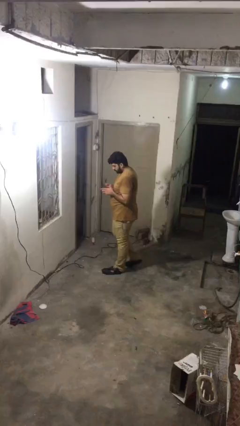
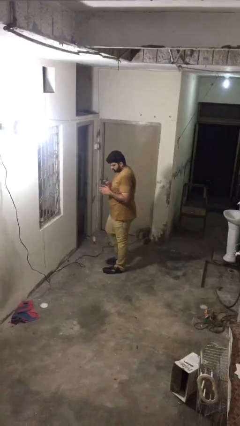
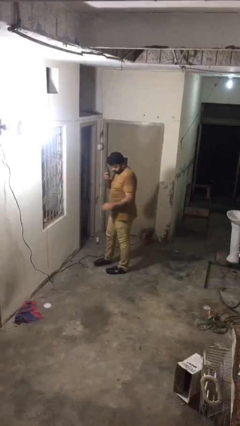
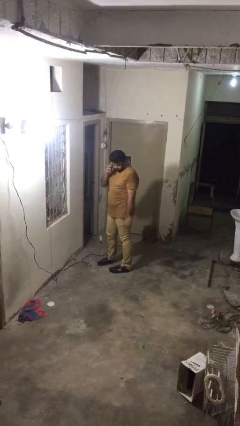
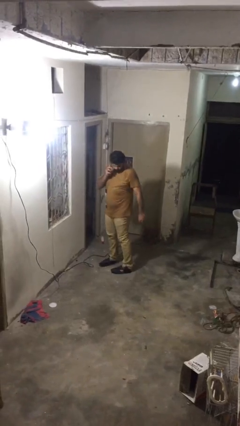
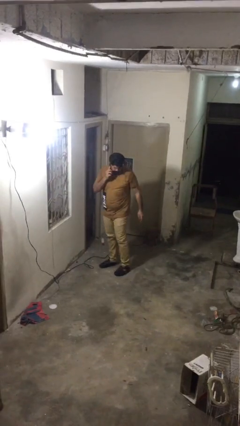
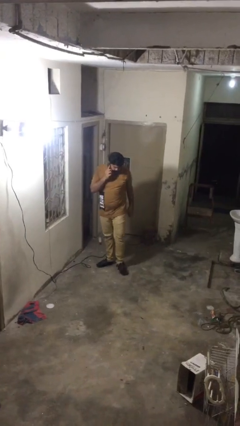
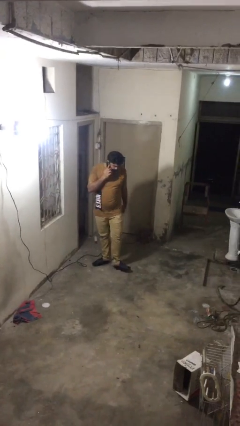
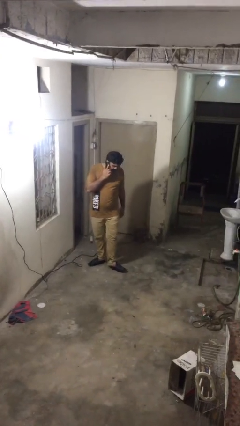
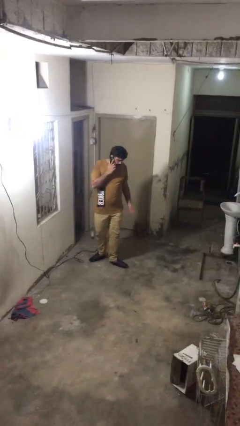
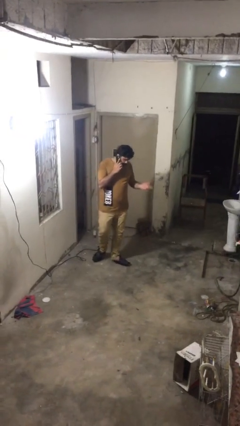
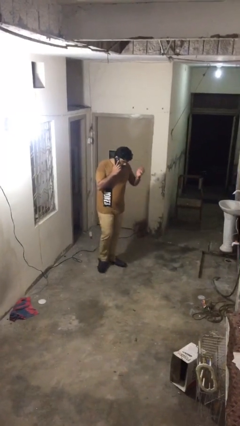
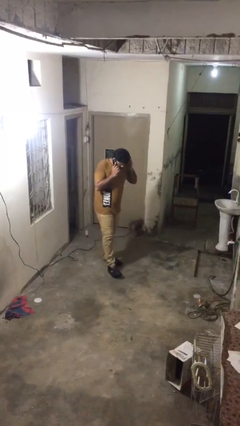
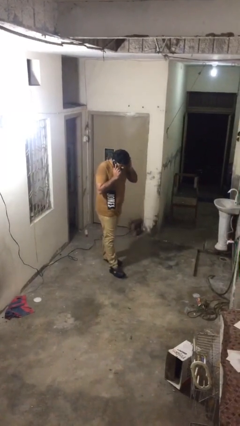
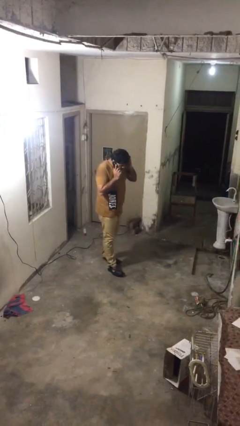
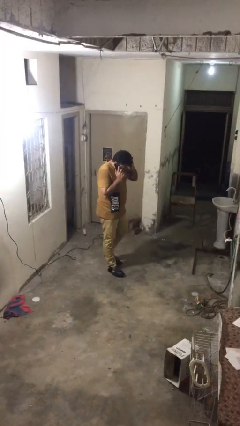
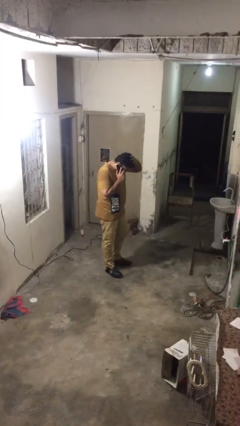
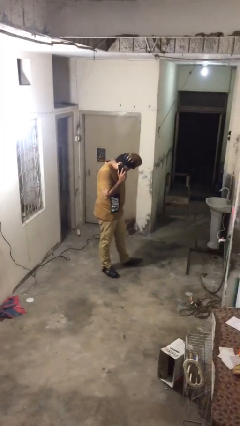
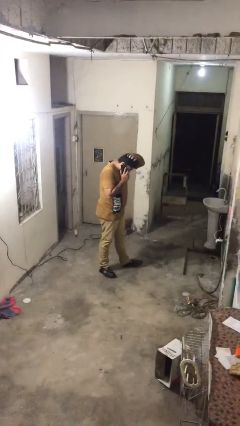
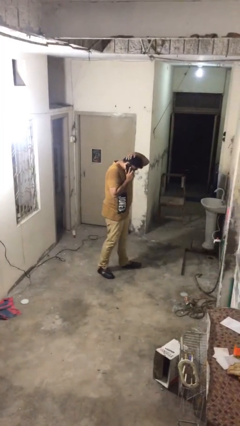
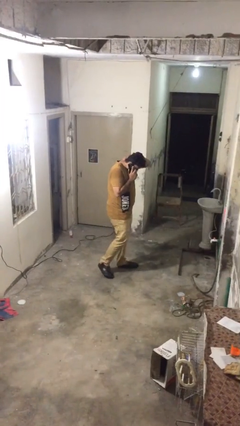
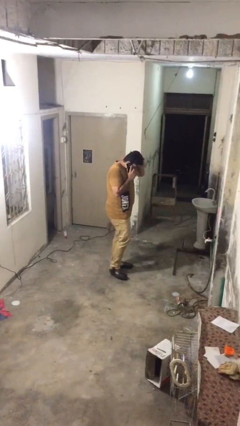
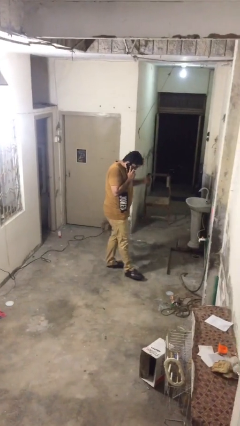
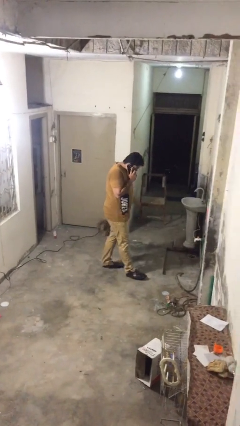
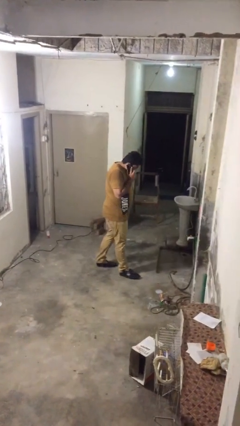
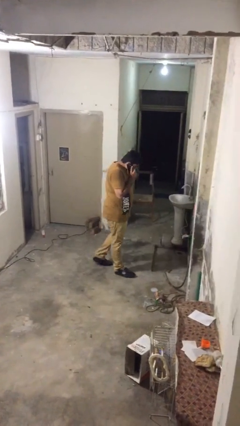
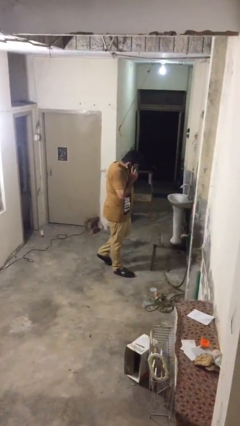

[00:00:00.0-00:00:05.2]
person talks on phone

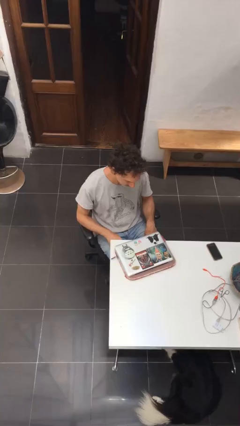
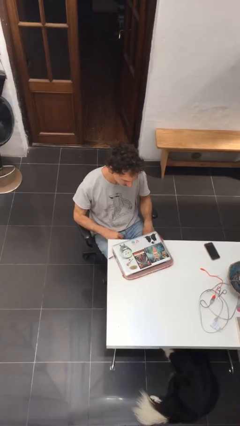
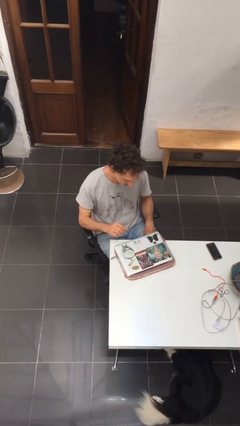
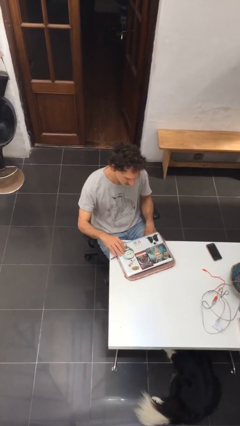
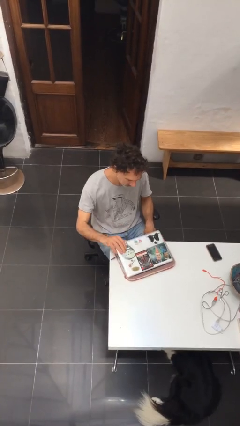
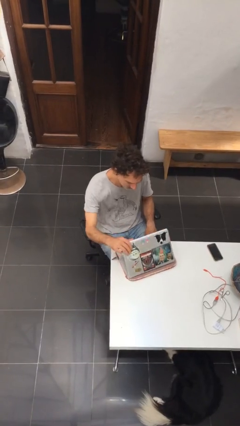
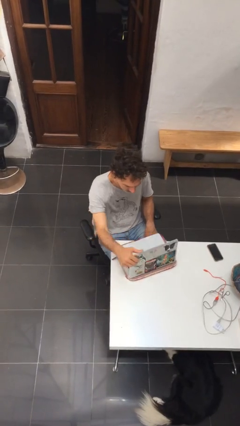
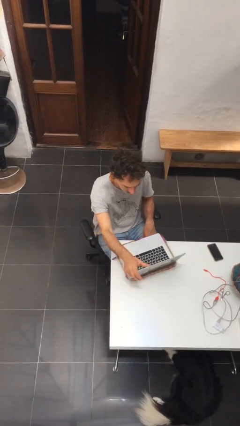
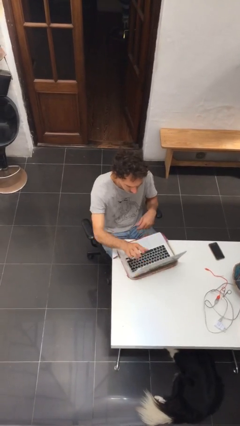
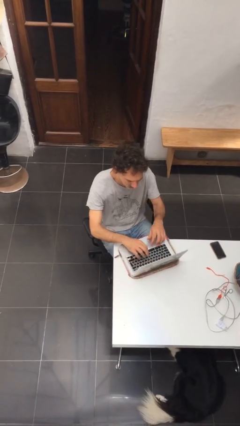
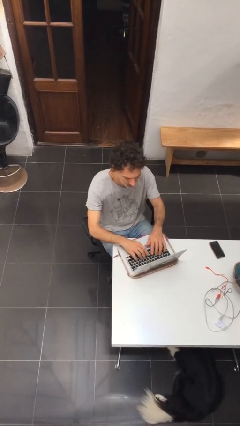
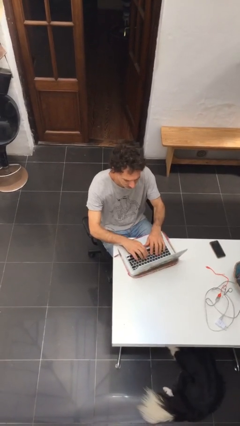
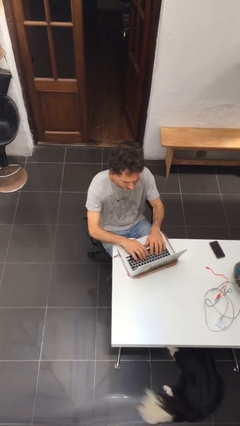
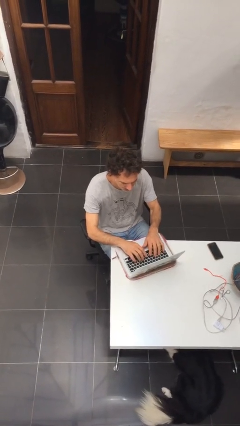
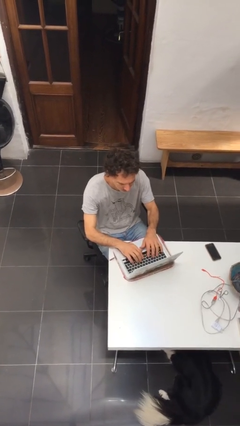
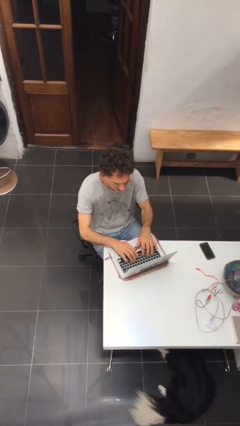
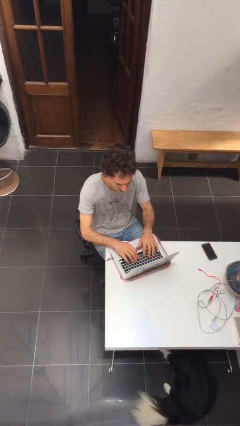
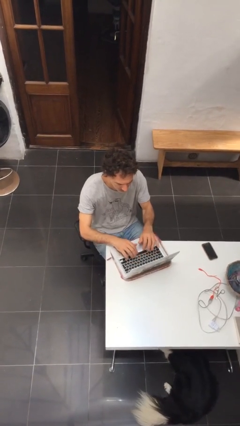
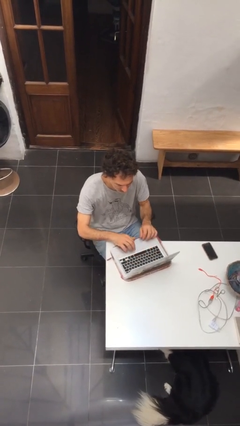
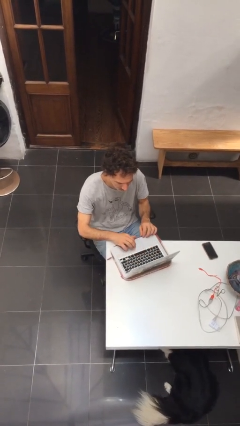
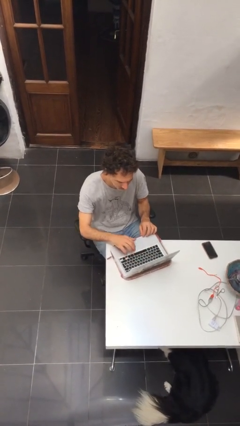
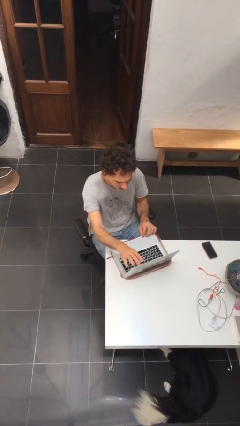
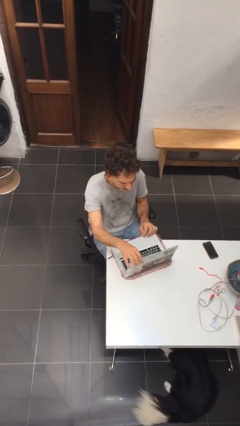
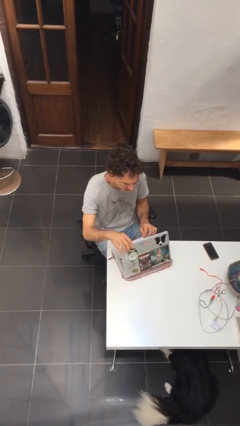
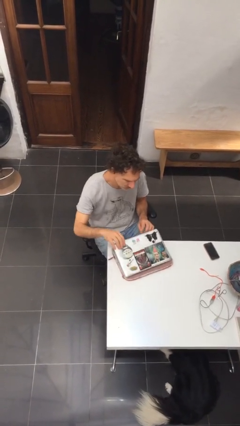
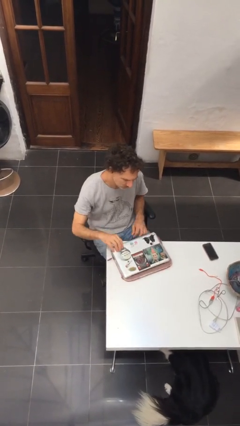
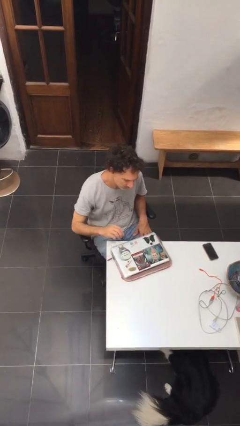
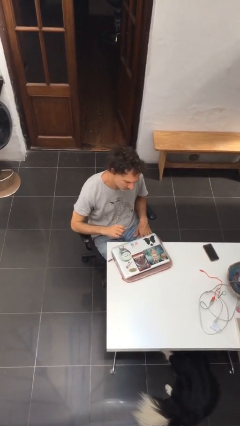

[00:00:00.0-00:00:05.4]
person interacts with laptop

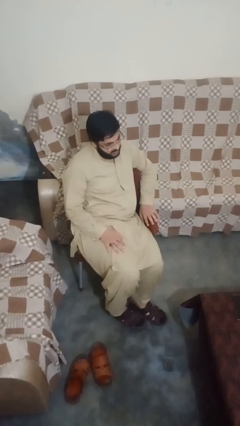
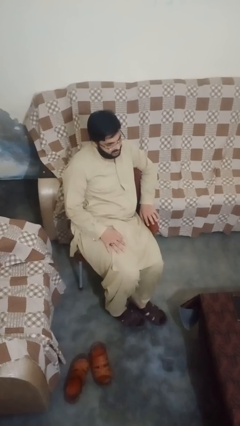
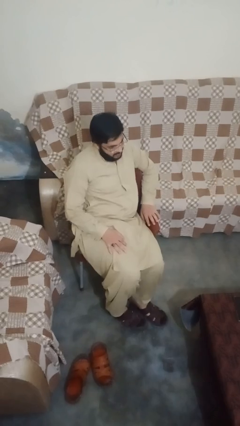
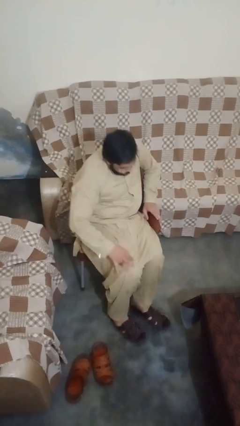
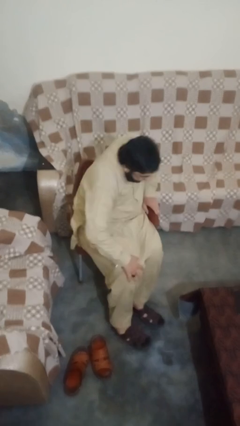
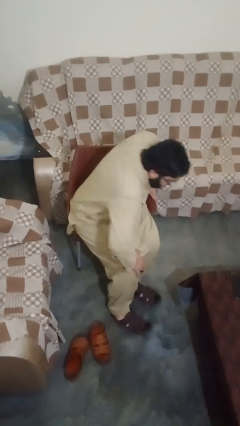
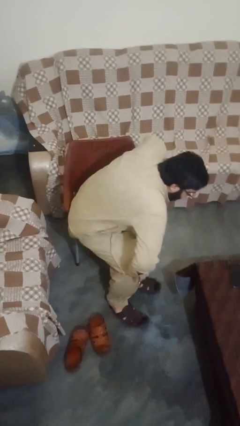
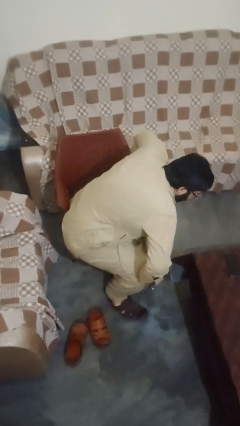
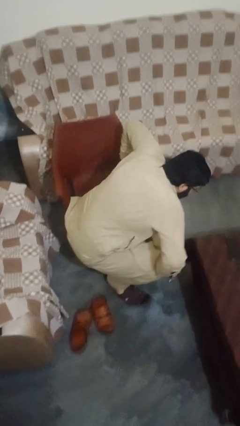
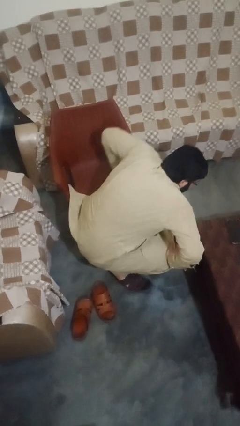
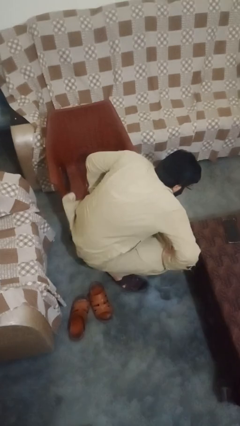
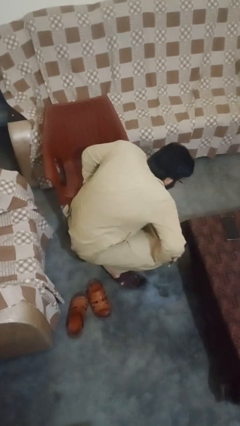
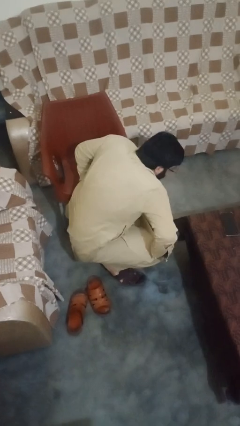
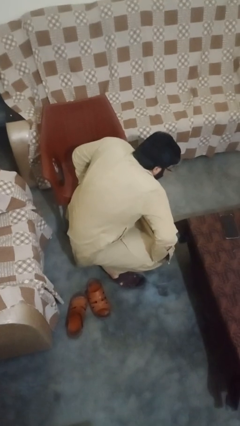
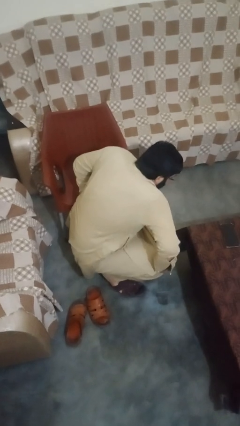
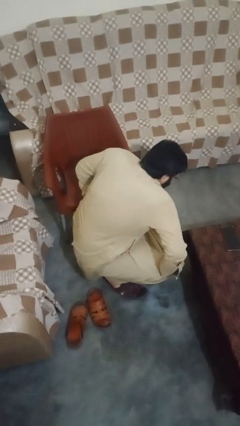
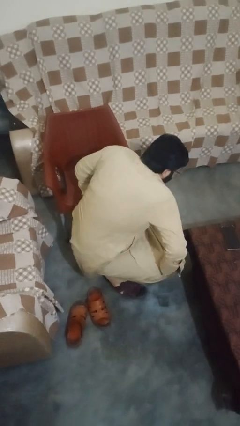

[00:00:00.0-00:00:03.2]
person falls from chair

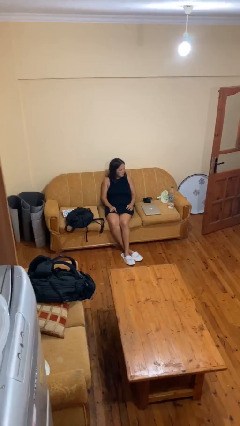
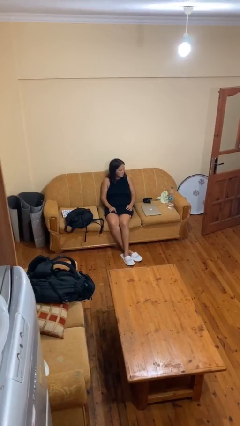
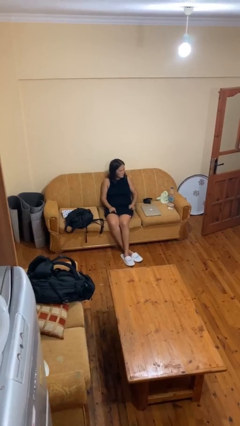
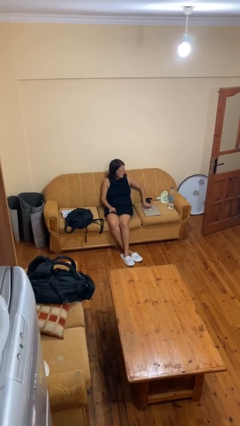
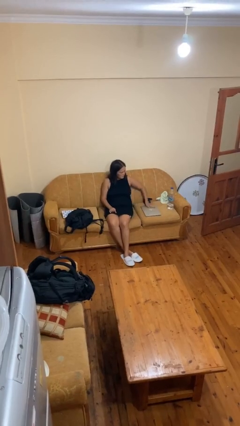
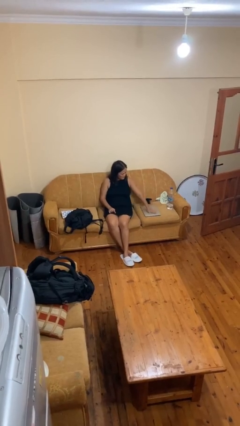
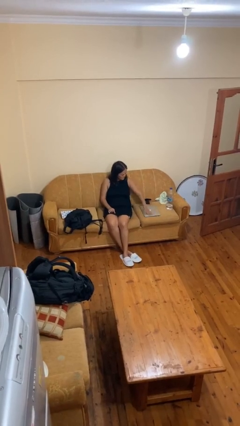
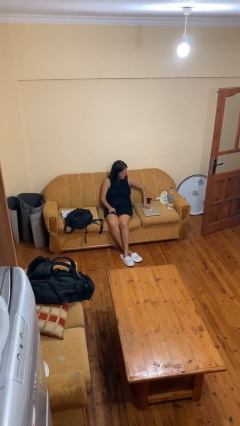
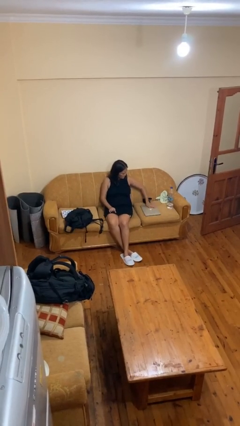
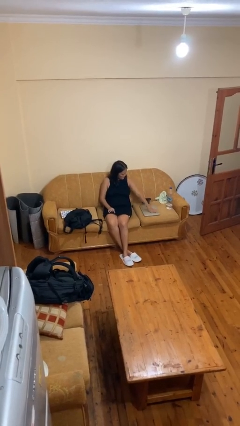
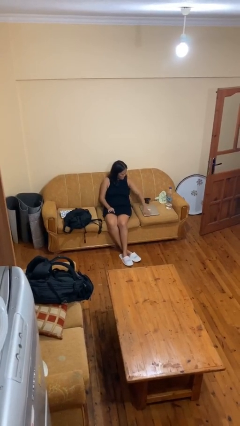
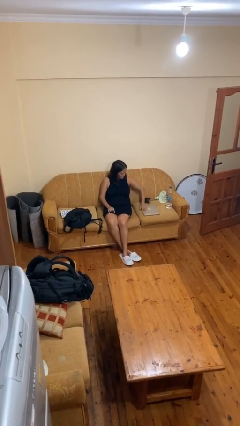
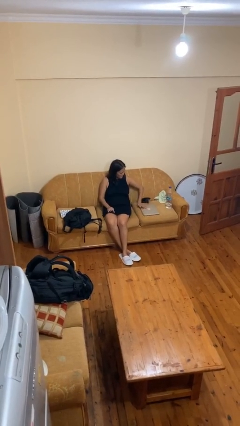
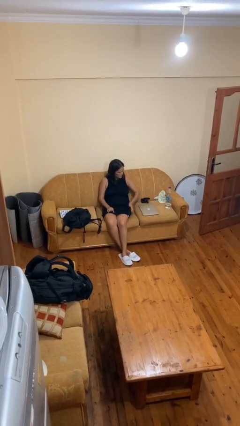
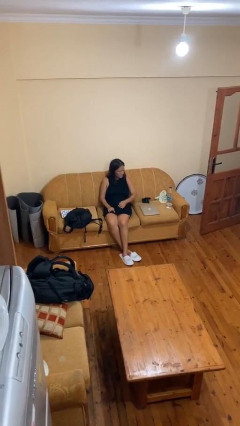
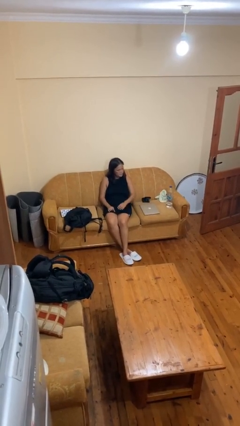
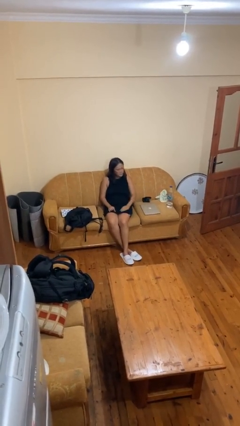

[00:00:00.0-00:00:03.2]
person waves hand over object

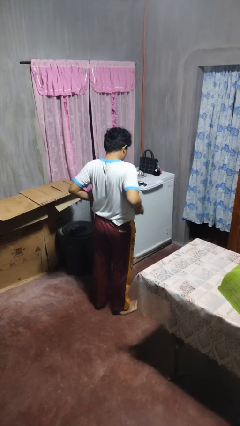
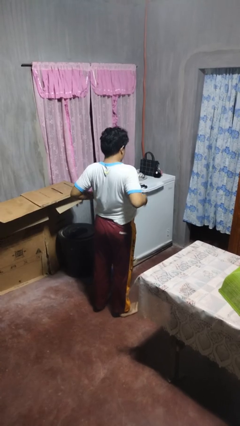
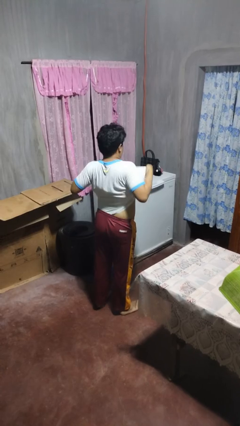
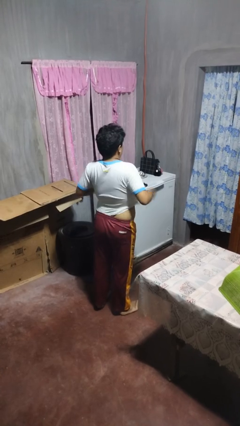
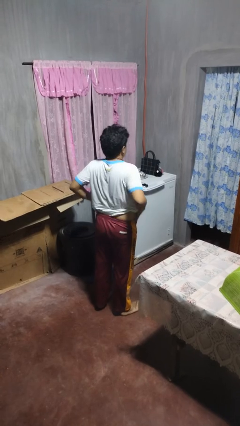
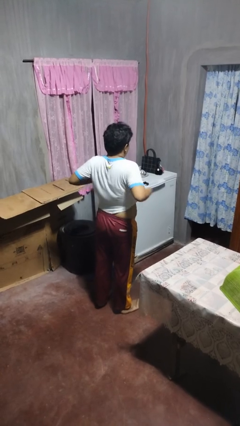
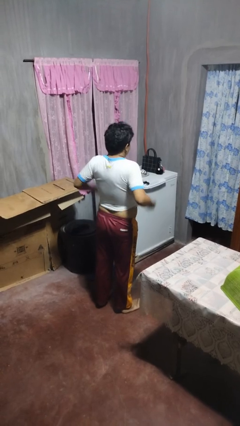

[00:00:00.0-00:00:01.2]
person untucks shirt
